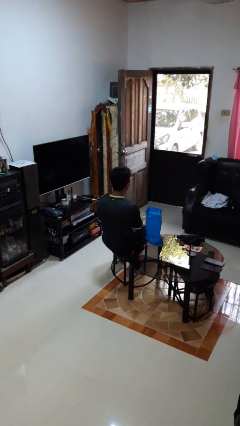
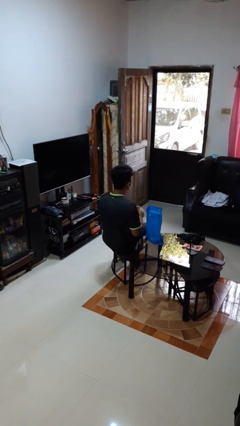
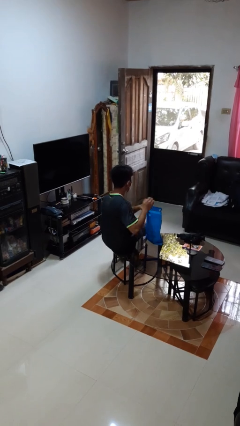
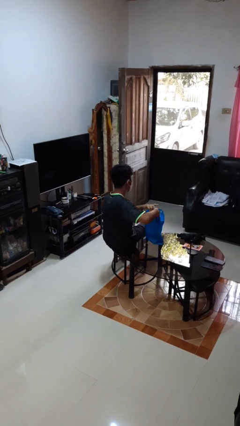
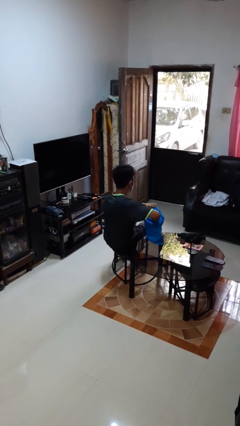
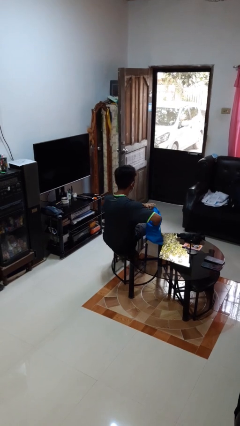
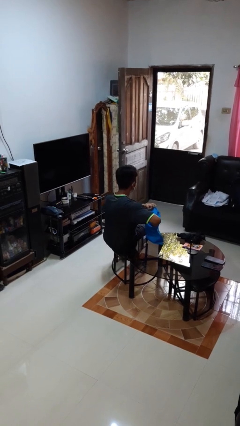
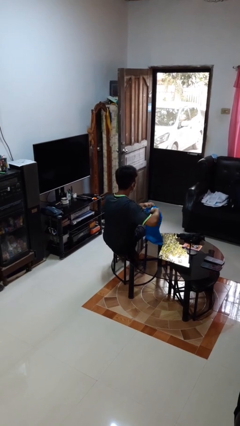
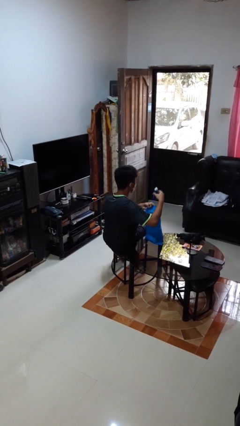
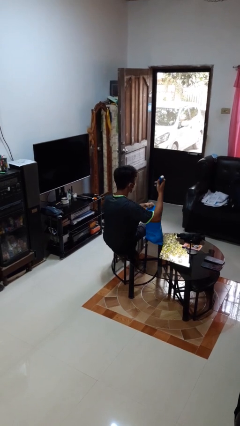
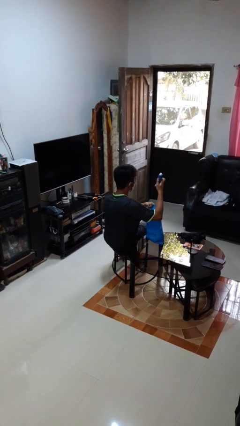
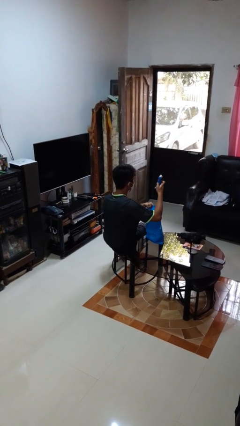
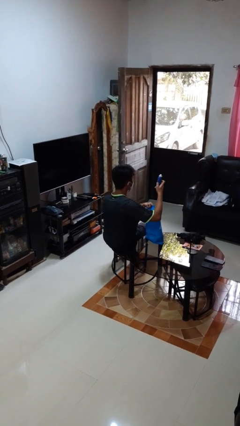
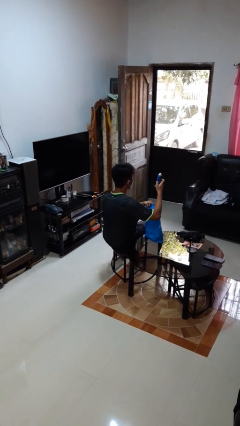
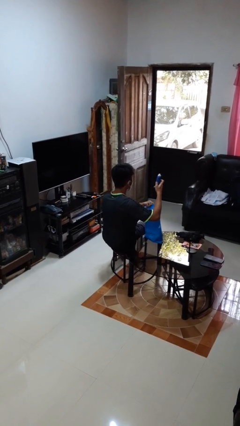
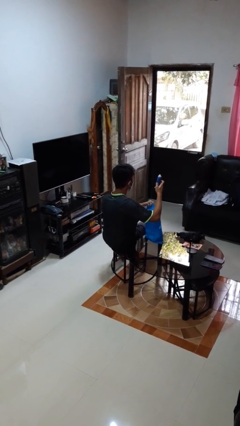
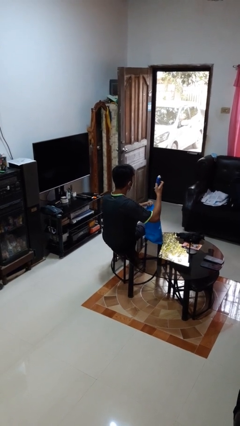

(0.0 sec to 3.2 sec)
person takes object from bag

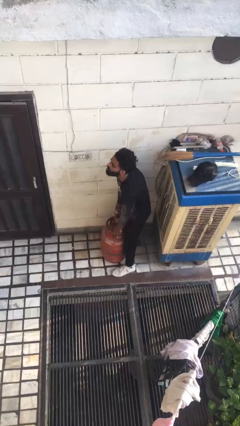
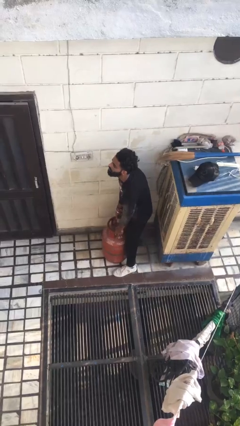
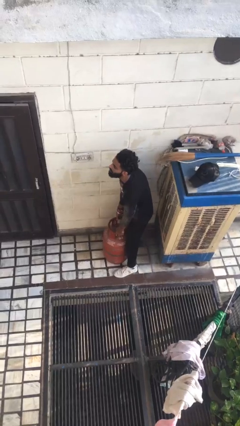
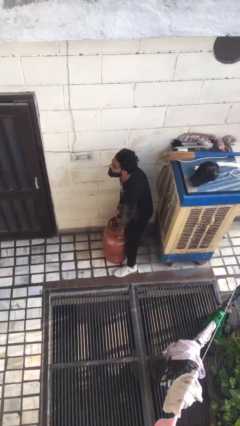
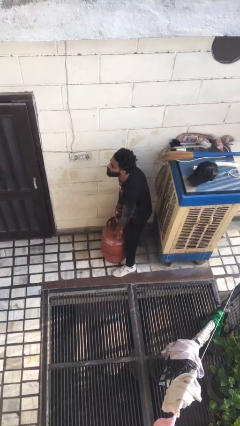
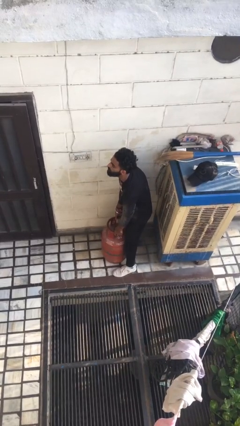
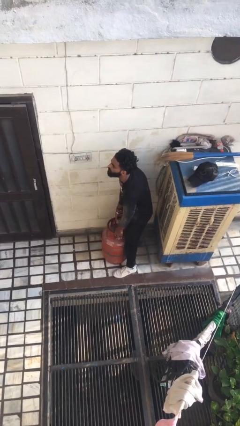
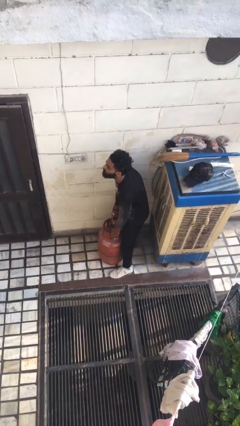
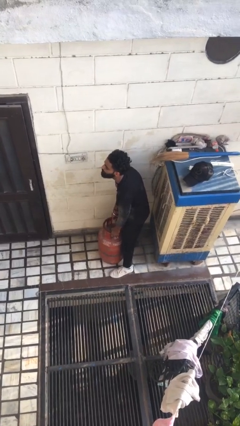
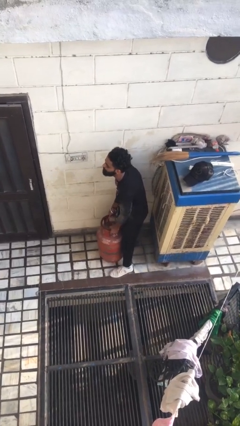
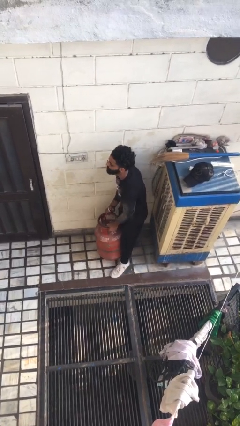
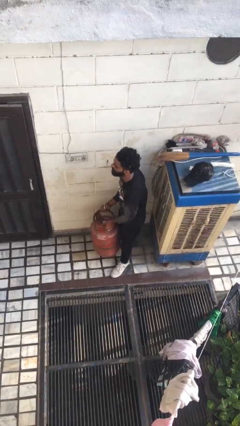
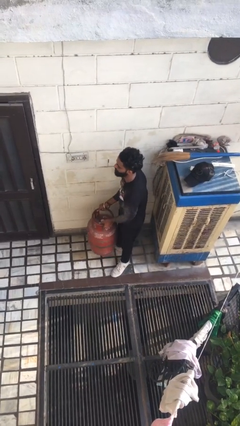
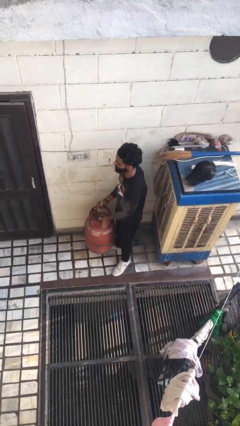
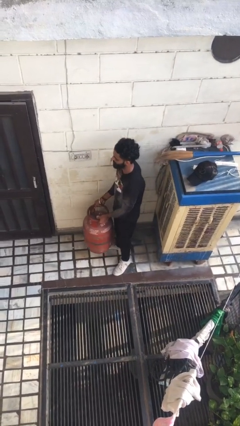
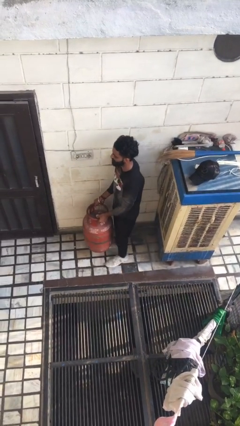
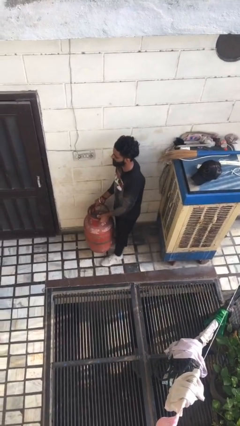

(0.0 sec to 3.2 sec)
person picks up object from floor

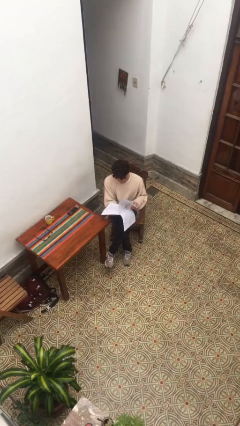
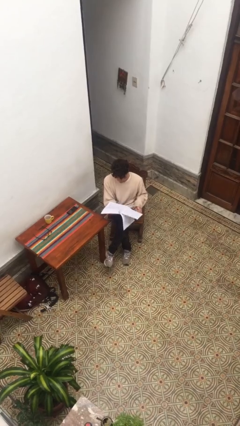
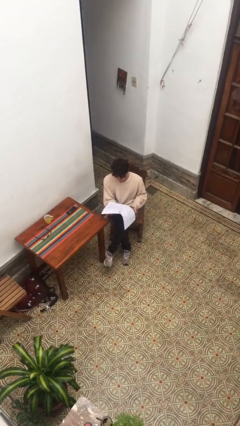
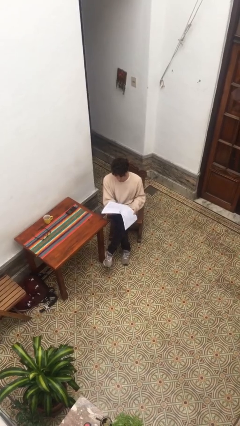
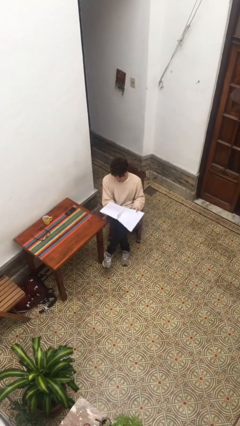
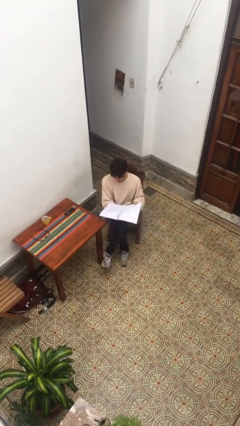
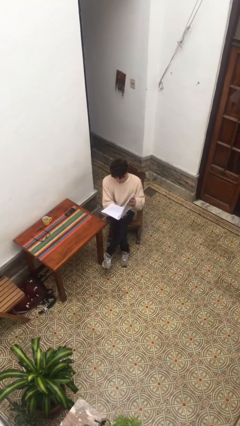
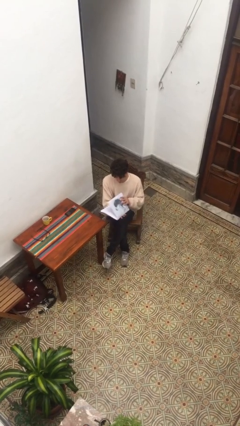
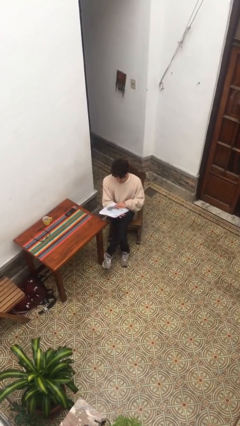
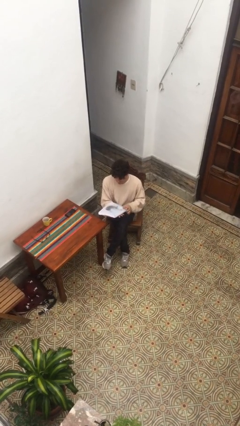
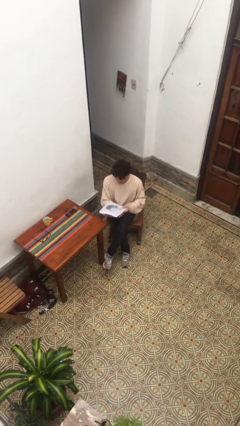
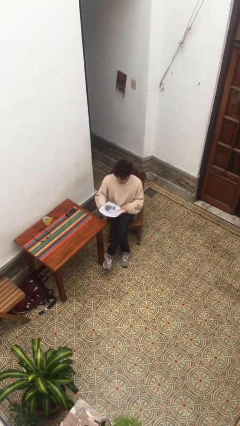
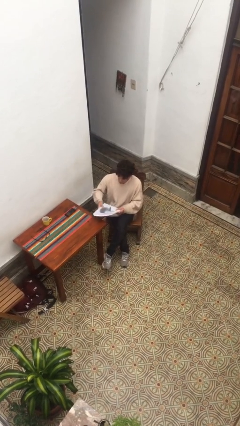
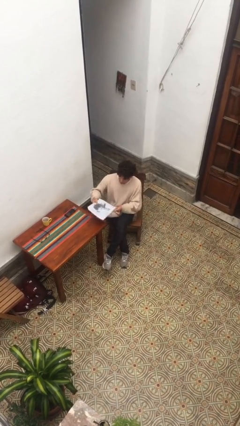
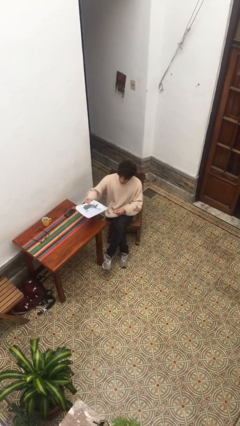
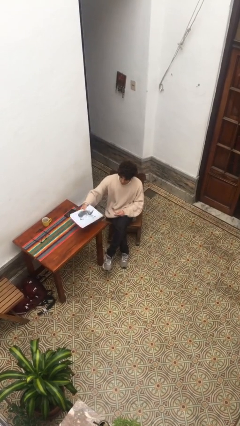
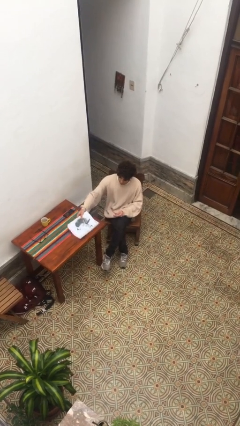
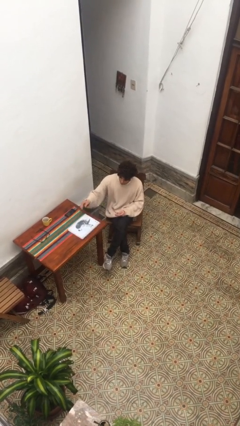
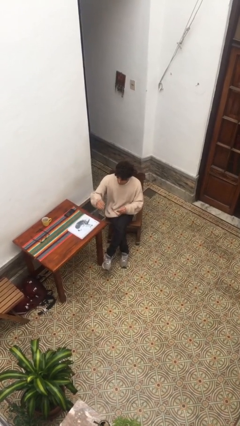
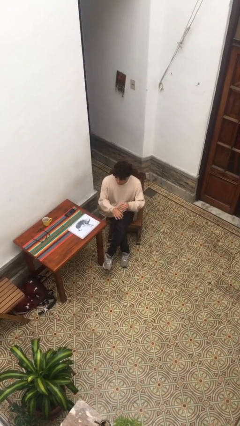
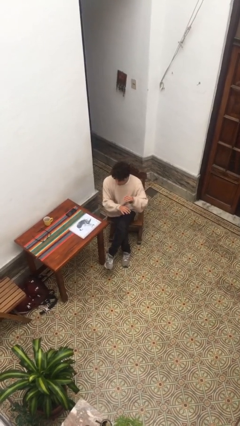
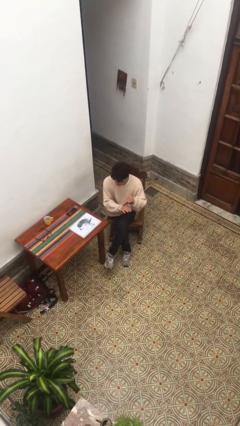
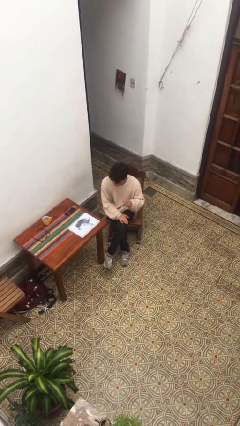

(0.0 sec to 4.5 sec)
person puts down object on table

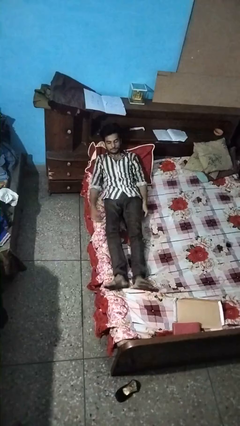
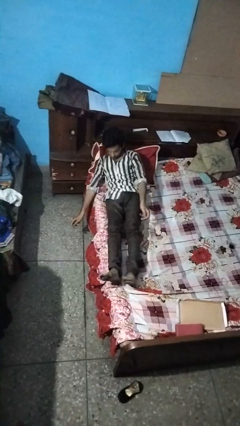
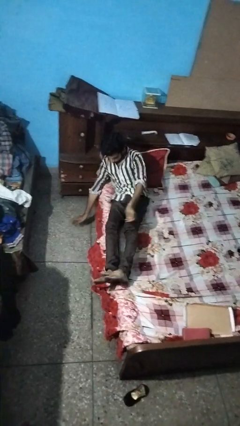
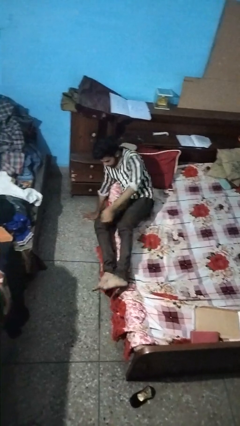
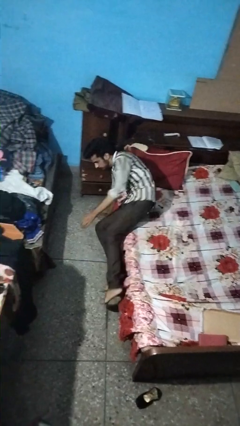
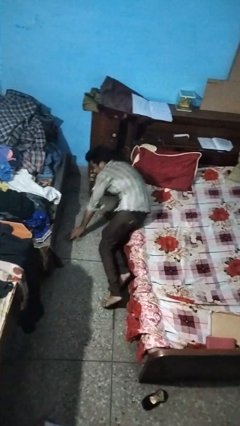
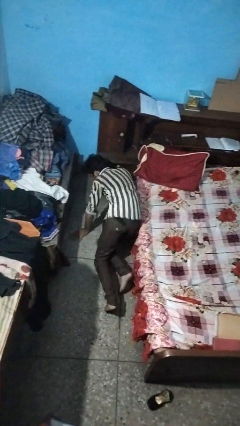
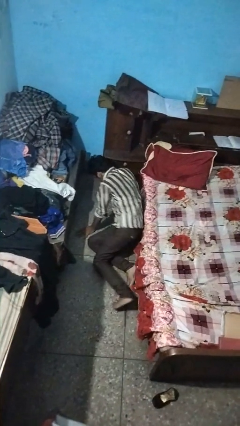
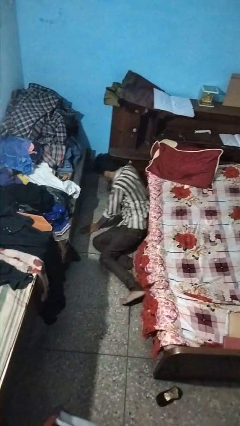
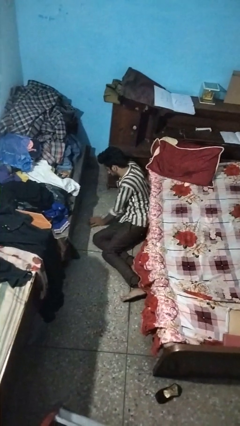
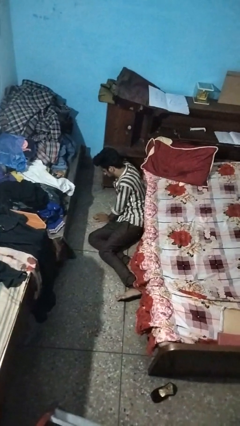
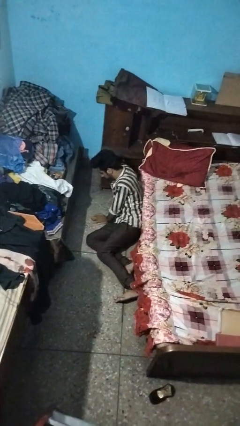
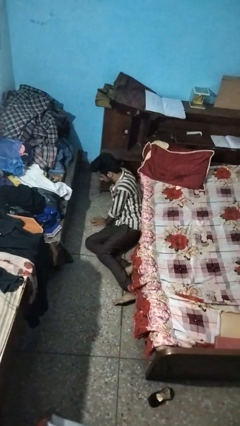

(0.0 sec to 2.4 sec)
person falls from bed

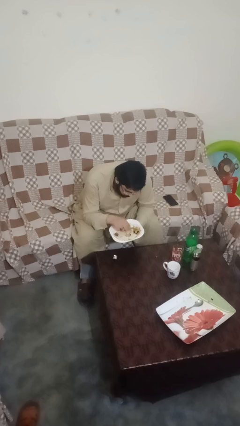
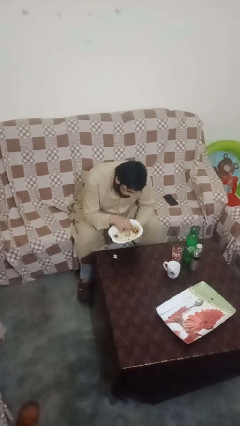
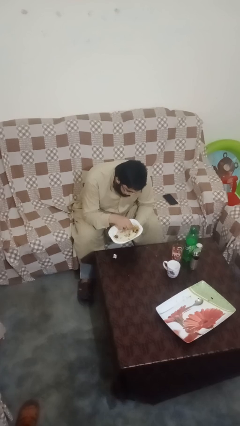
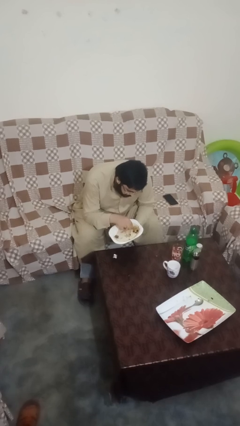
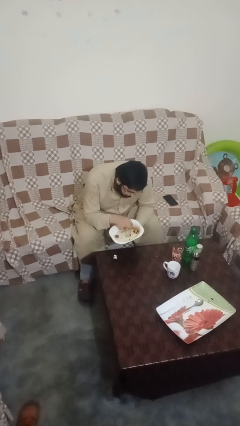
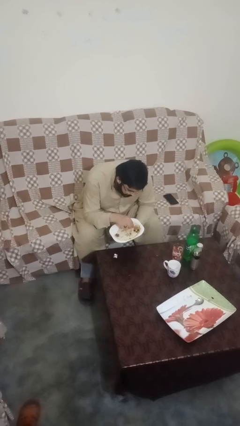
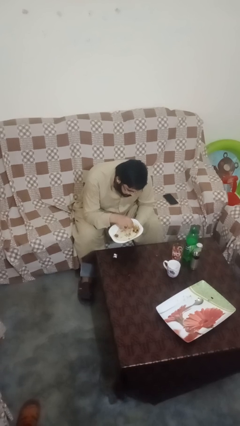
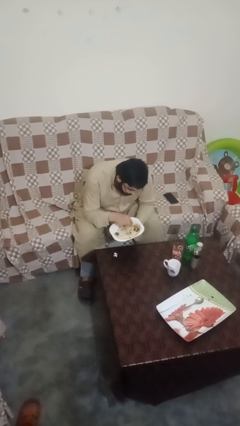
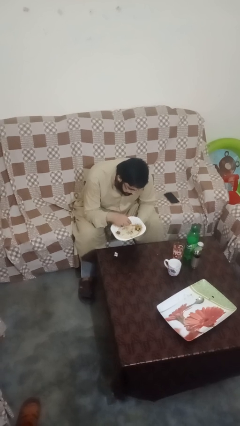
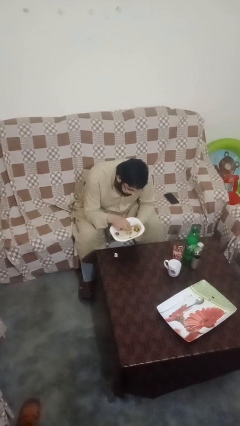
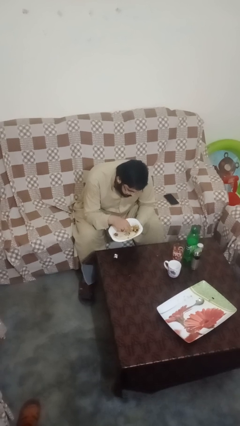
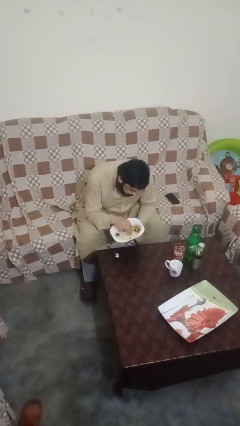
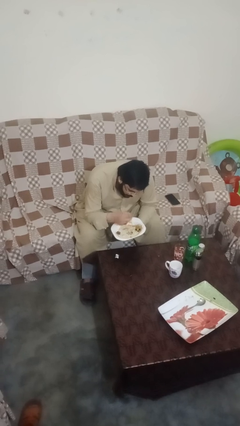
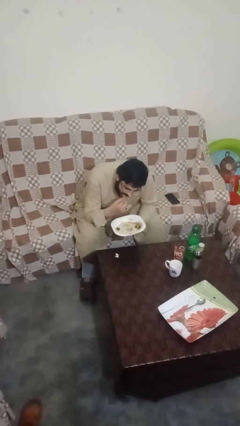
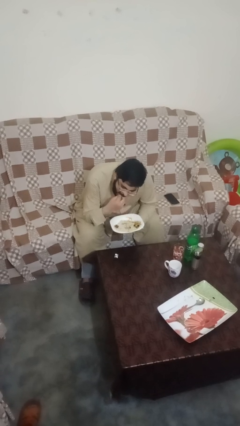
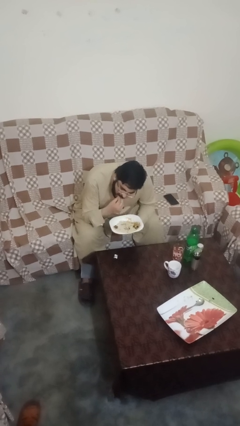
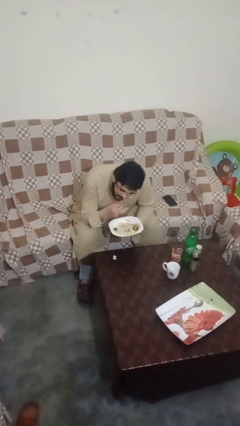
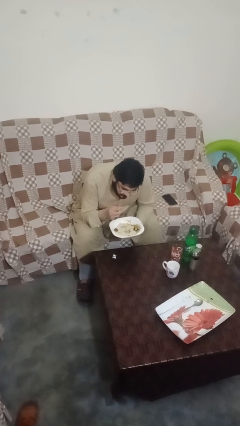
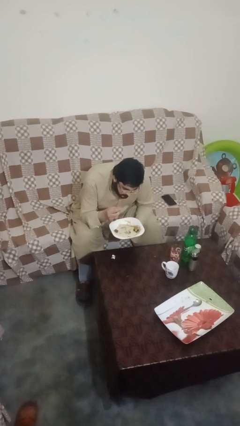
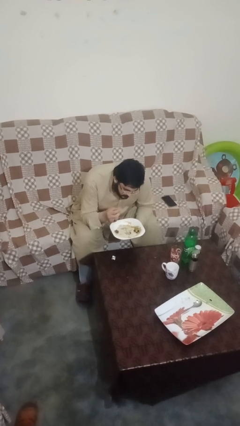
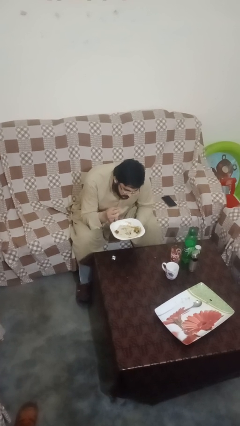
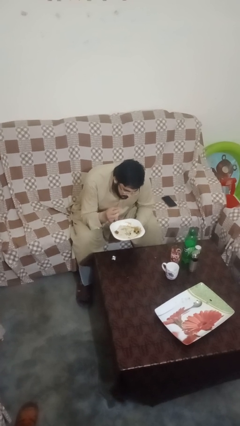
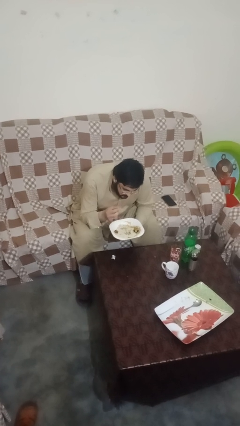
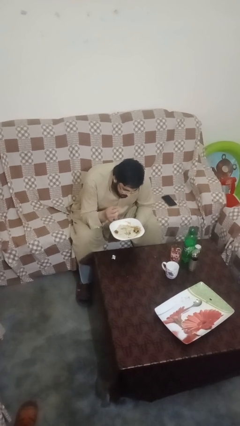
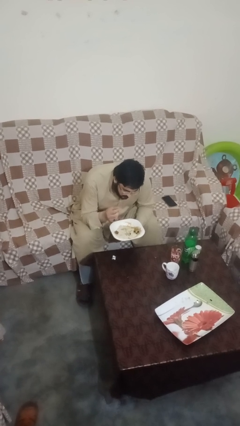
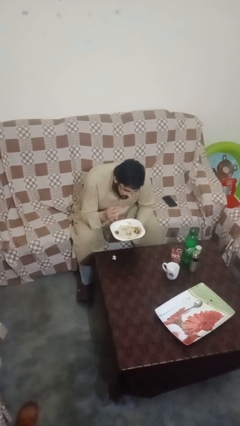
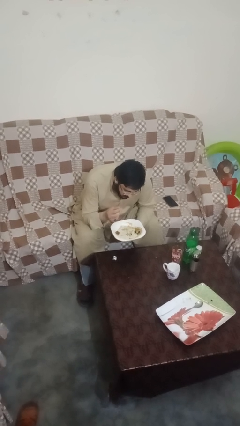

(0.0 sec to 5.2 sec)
person eats with hands
